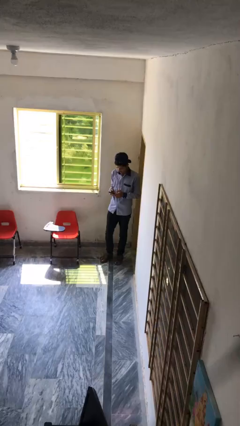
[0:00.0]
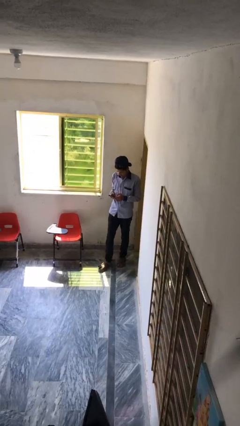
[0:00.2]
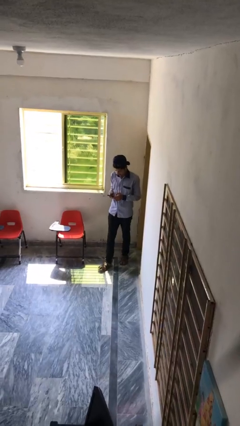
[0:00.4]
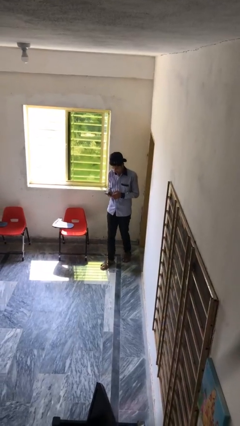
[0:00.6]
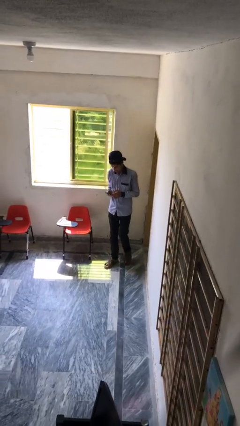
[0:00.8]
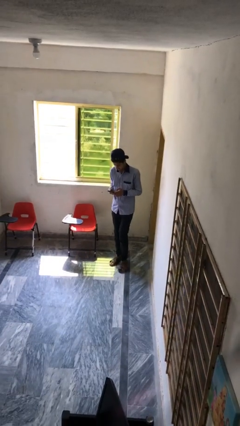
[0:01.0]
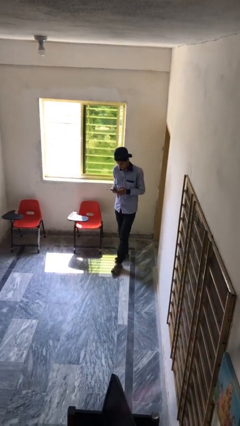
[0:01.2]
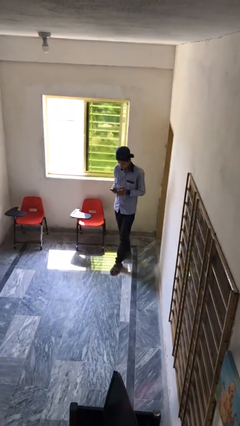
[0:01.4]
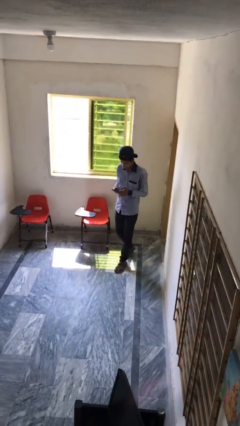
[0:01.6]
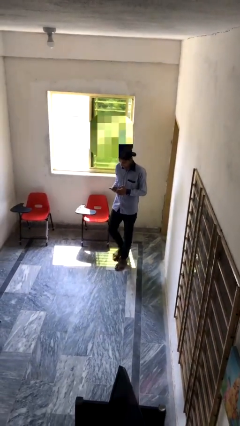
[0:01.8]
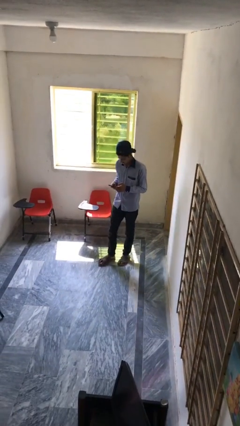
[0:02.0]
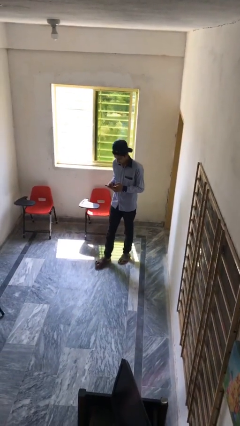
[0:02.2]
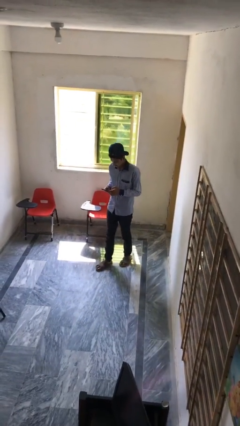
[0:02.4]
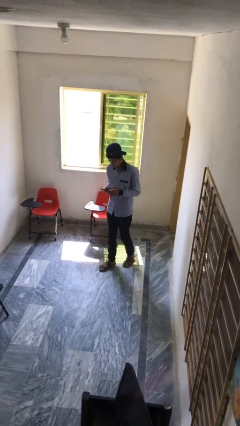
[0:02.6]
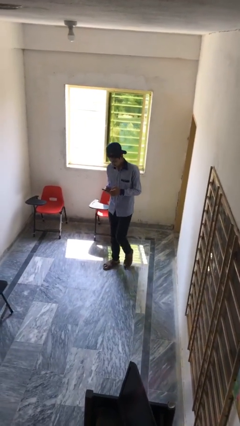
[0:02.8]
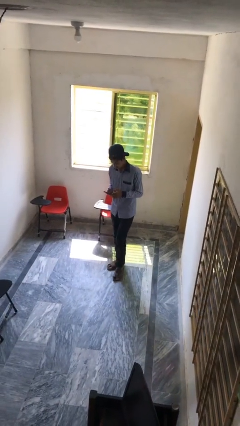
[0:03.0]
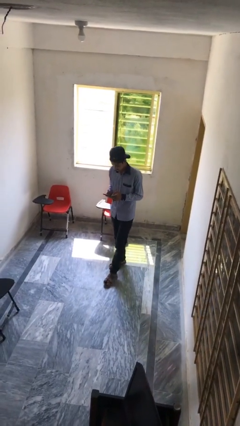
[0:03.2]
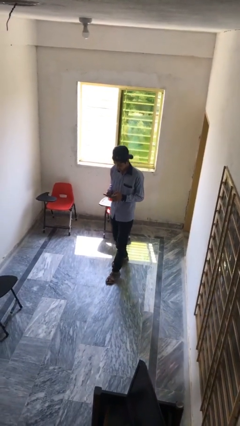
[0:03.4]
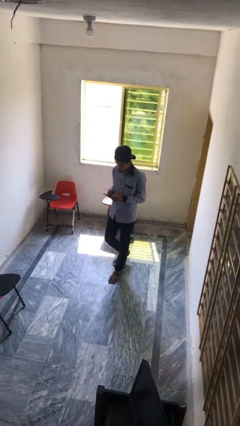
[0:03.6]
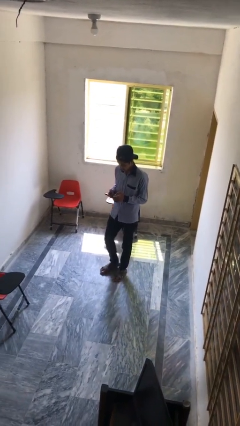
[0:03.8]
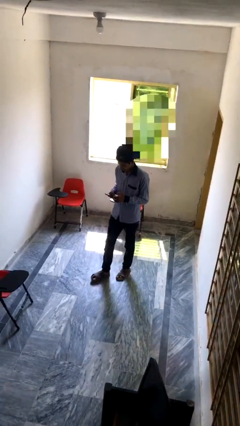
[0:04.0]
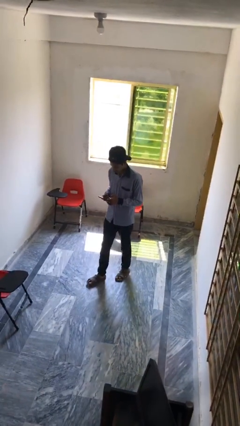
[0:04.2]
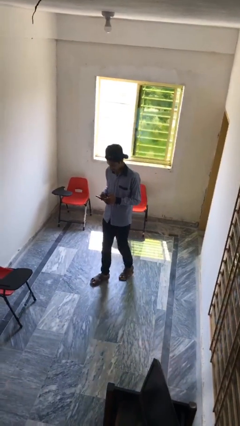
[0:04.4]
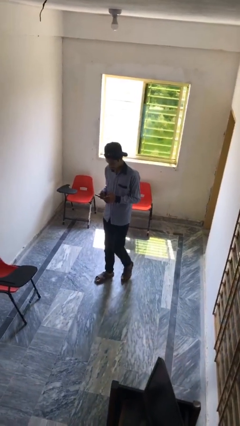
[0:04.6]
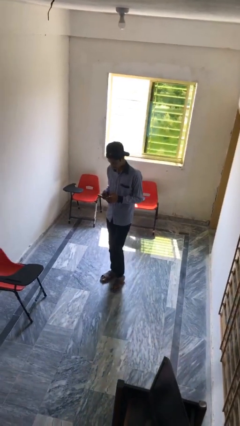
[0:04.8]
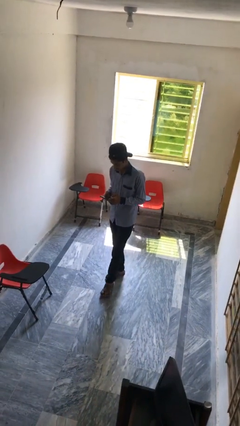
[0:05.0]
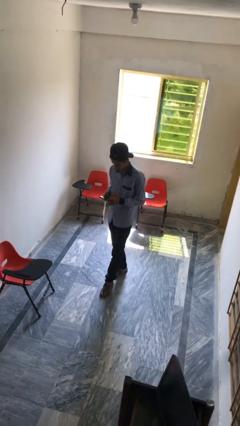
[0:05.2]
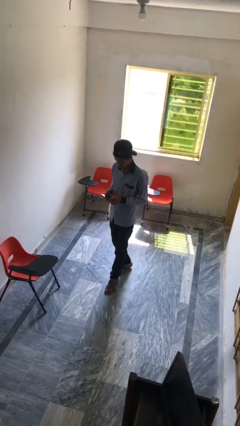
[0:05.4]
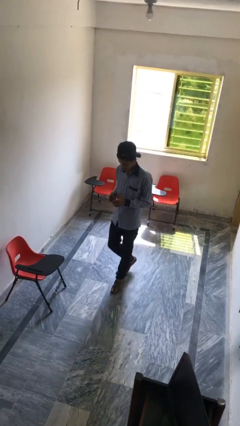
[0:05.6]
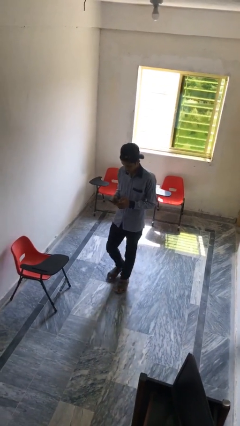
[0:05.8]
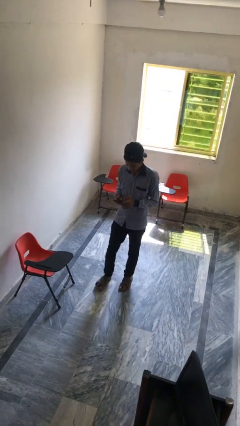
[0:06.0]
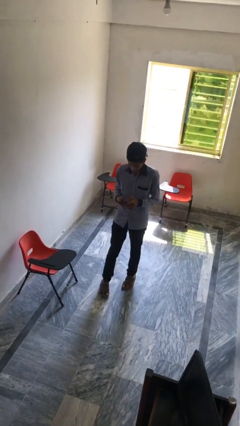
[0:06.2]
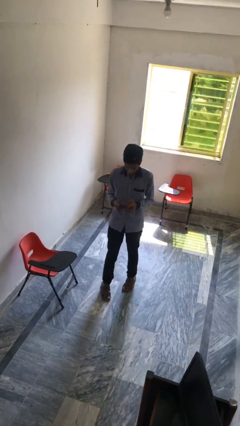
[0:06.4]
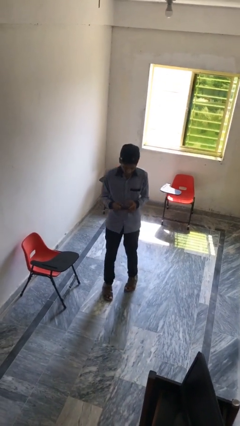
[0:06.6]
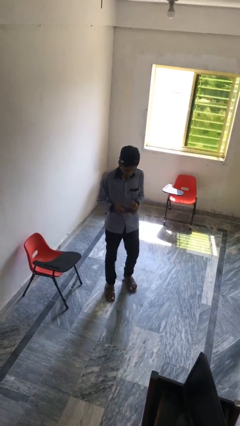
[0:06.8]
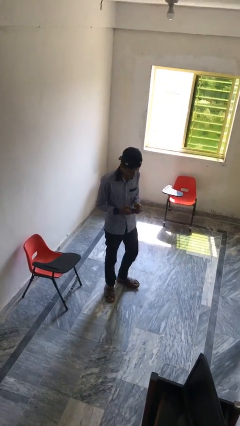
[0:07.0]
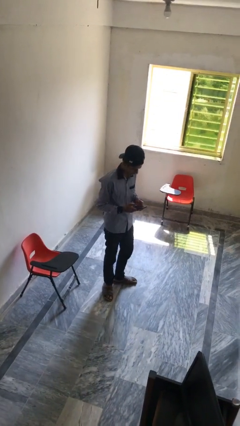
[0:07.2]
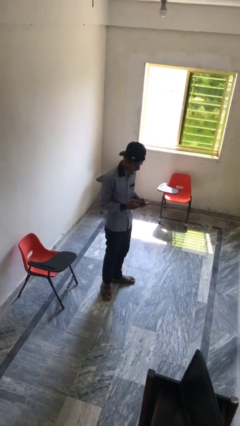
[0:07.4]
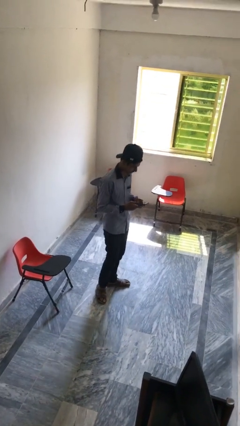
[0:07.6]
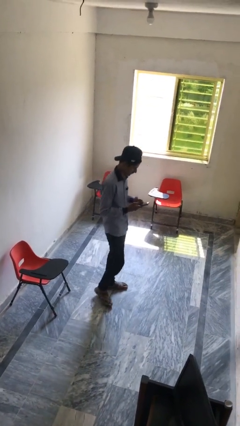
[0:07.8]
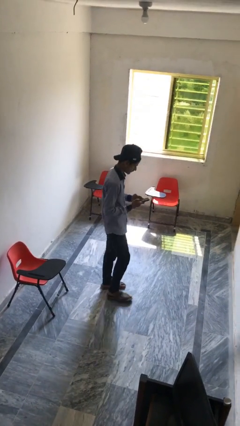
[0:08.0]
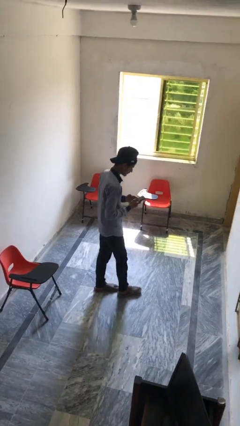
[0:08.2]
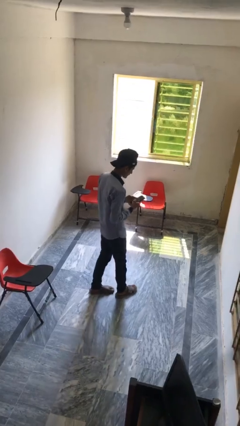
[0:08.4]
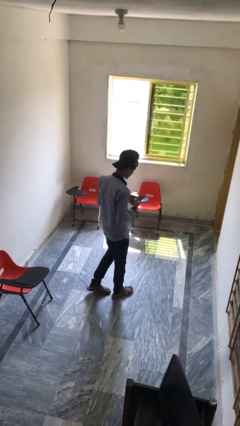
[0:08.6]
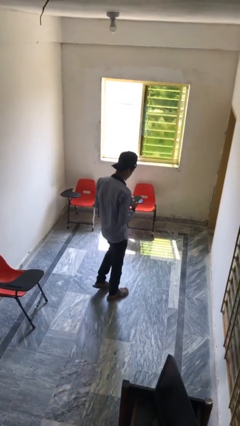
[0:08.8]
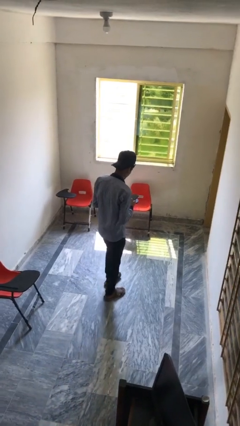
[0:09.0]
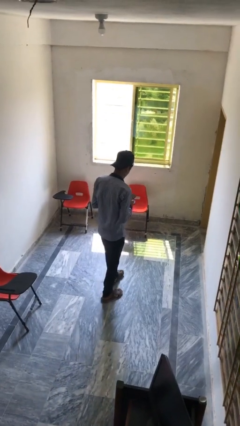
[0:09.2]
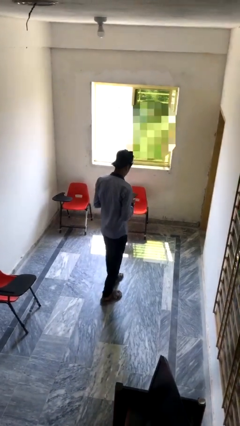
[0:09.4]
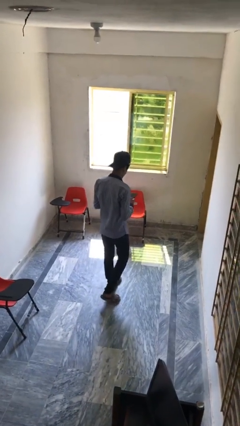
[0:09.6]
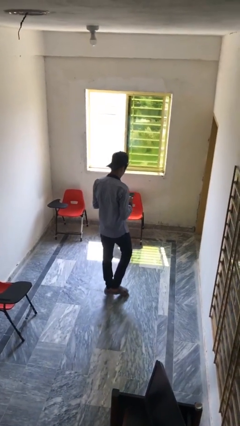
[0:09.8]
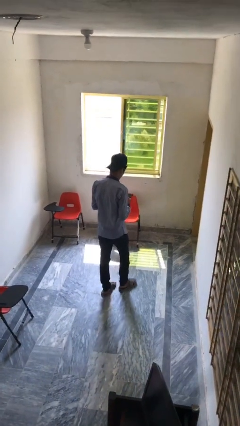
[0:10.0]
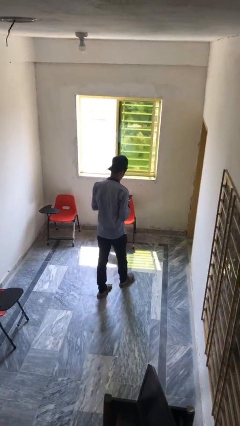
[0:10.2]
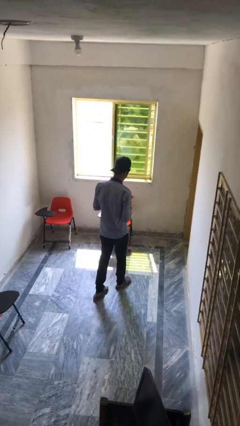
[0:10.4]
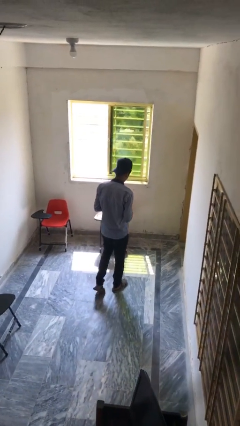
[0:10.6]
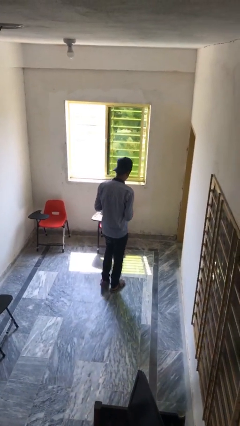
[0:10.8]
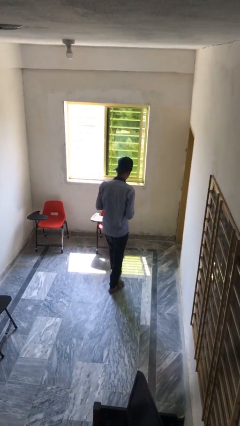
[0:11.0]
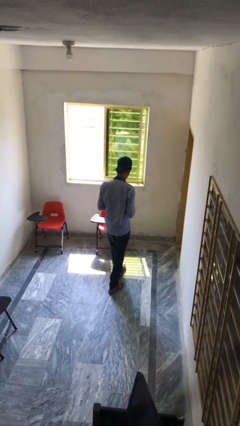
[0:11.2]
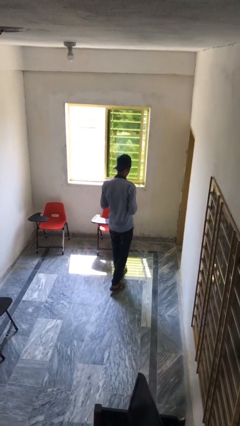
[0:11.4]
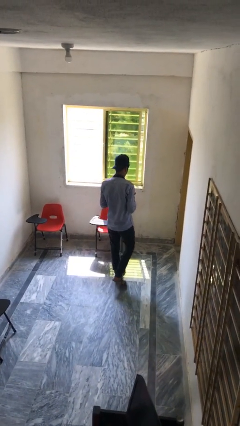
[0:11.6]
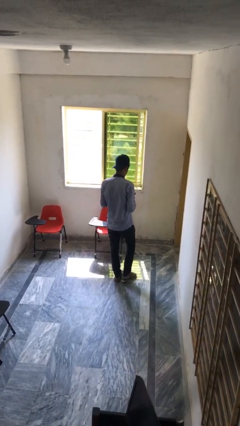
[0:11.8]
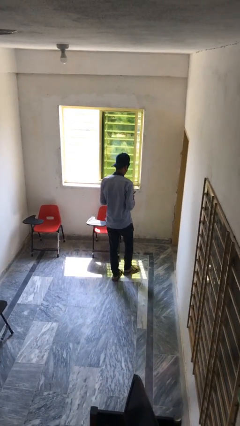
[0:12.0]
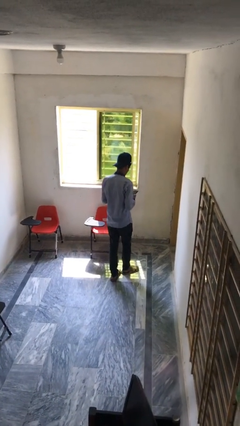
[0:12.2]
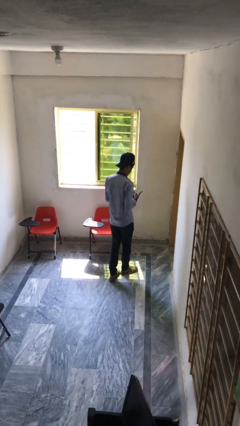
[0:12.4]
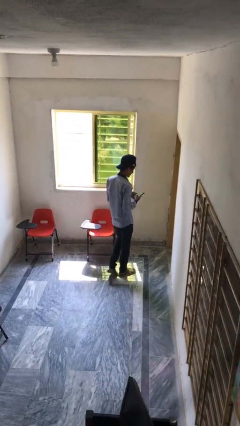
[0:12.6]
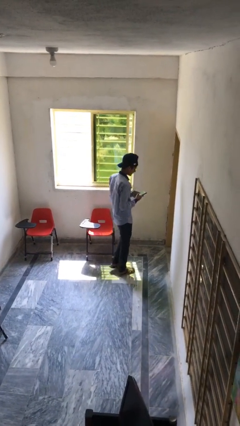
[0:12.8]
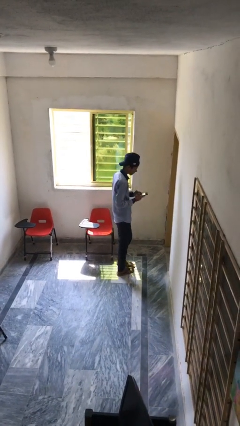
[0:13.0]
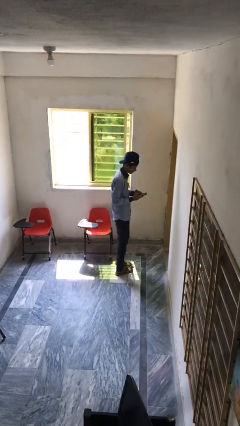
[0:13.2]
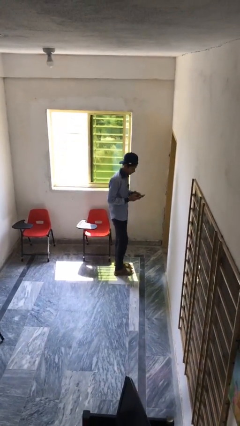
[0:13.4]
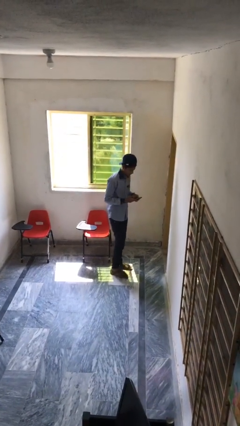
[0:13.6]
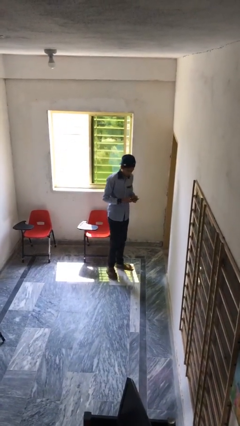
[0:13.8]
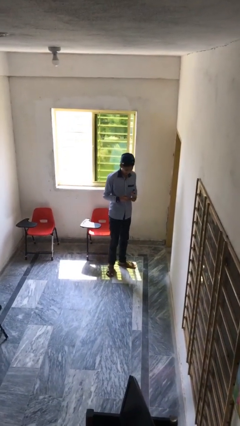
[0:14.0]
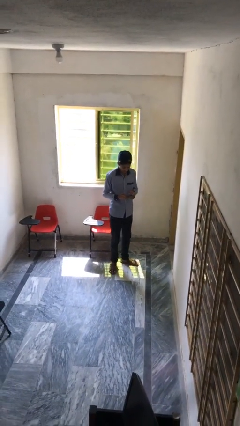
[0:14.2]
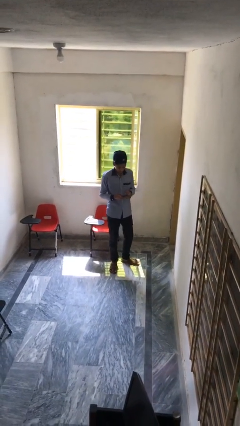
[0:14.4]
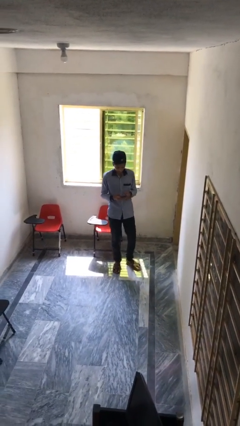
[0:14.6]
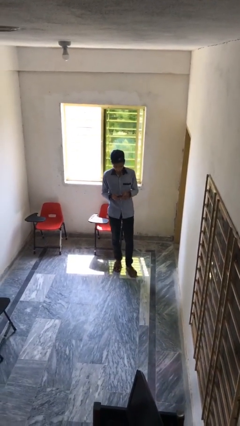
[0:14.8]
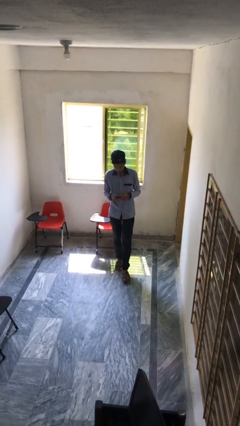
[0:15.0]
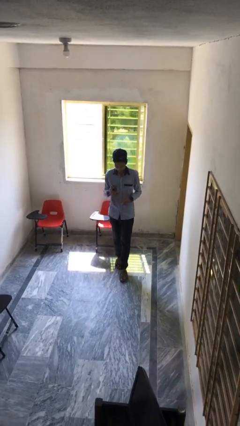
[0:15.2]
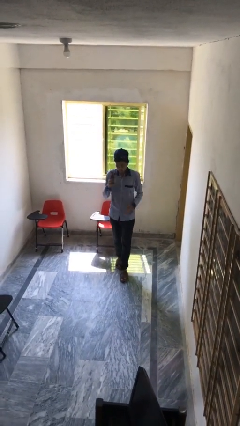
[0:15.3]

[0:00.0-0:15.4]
person texts on phone

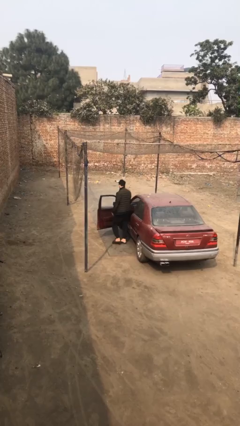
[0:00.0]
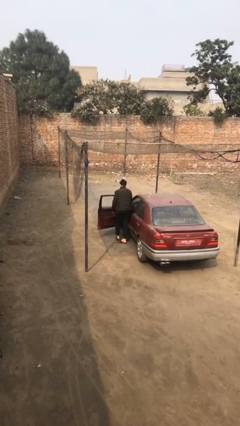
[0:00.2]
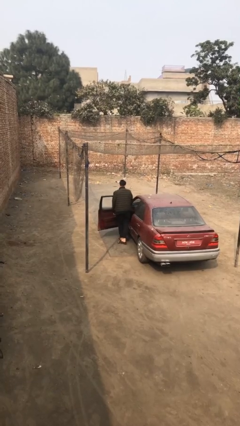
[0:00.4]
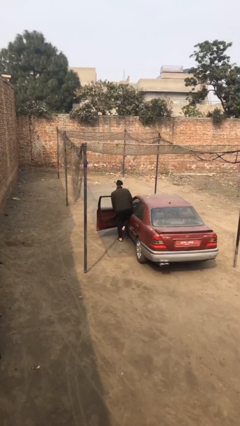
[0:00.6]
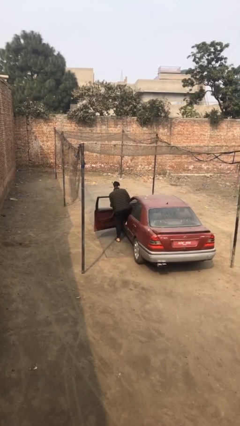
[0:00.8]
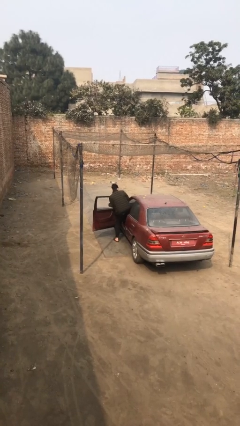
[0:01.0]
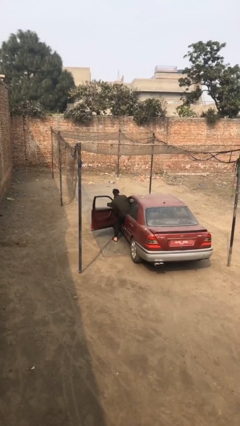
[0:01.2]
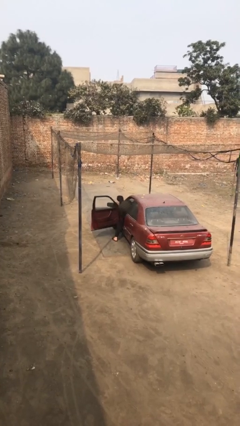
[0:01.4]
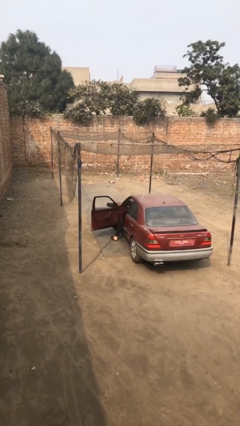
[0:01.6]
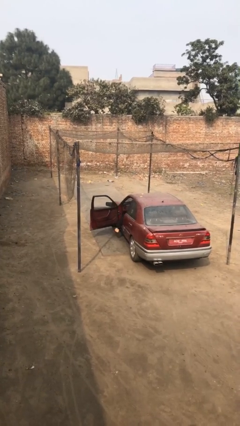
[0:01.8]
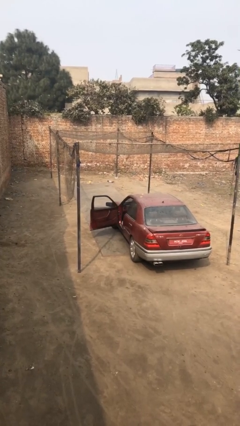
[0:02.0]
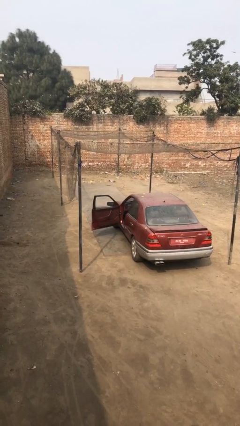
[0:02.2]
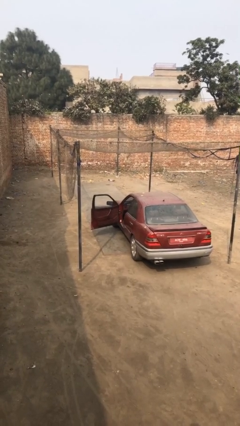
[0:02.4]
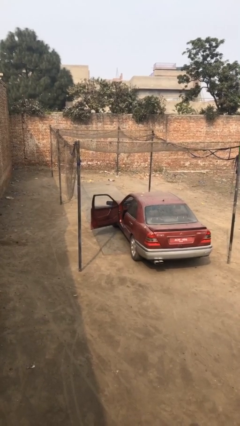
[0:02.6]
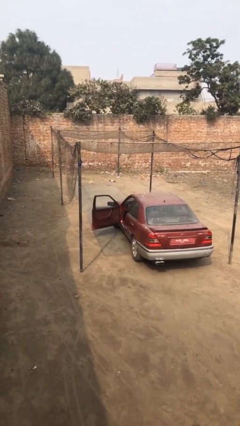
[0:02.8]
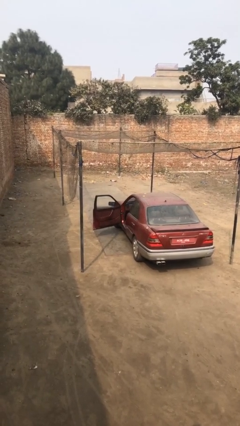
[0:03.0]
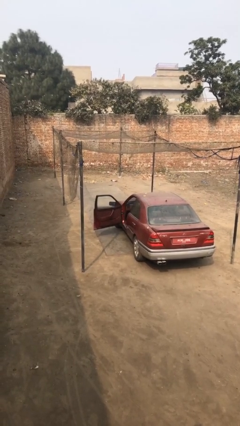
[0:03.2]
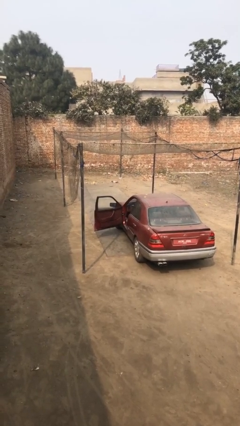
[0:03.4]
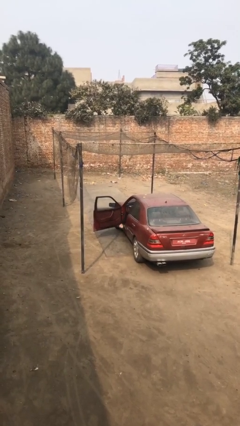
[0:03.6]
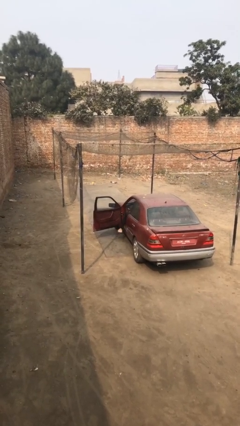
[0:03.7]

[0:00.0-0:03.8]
person enters car
